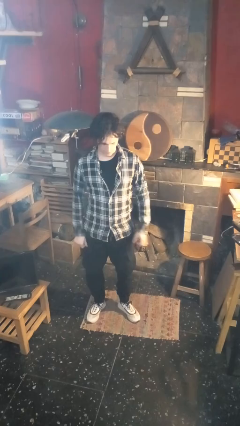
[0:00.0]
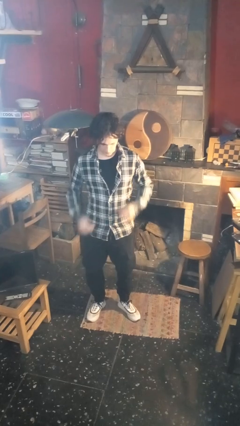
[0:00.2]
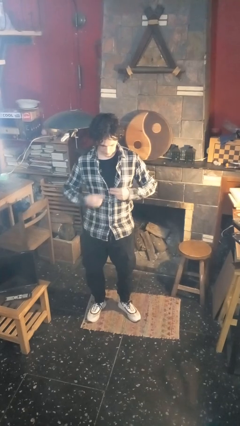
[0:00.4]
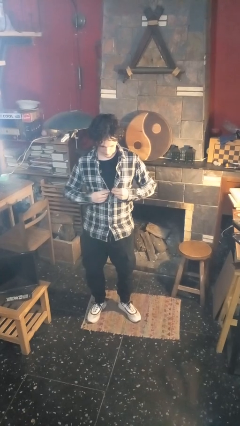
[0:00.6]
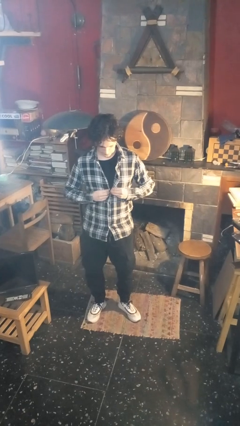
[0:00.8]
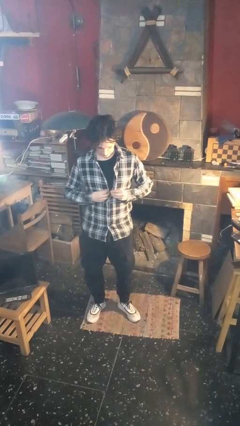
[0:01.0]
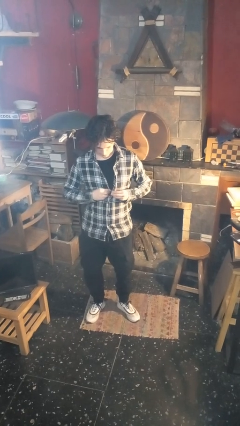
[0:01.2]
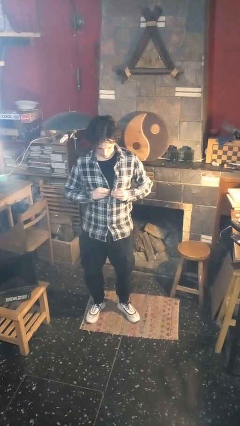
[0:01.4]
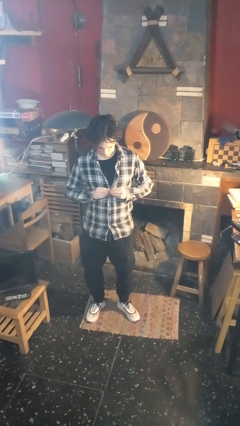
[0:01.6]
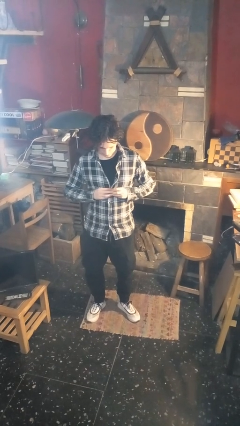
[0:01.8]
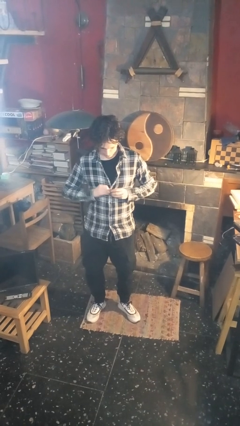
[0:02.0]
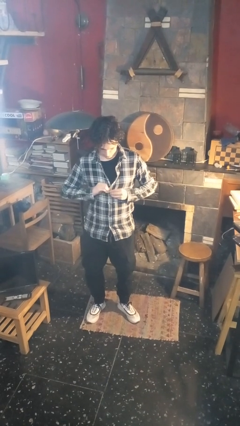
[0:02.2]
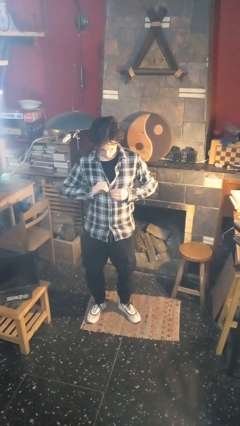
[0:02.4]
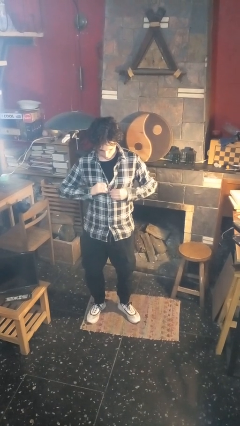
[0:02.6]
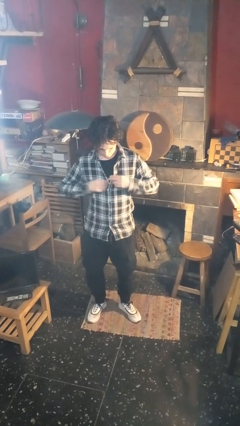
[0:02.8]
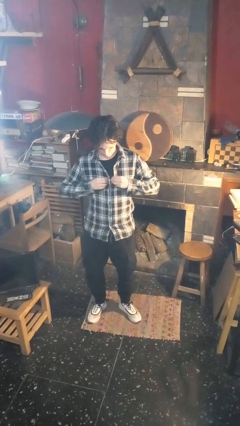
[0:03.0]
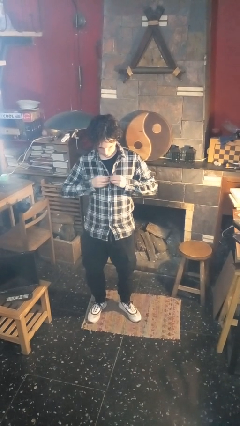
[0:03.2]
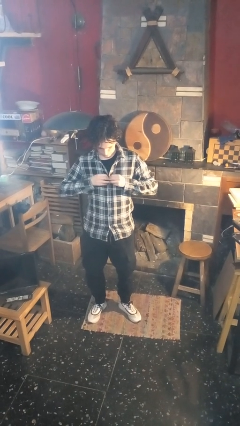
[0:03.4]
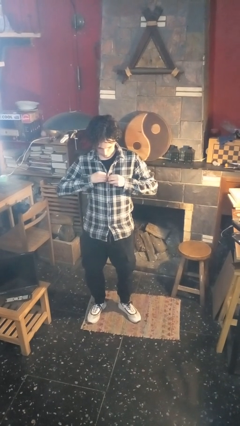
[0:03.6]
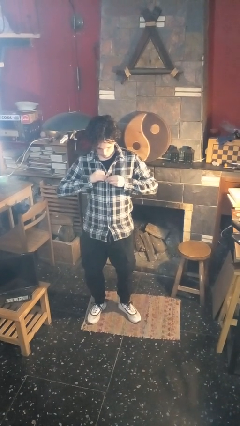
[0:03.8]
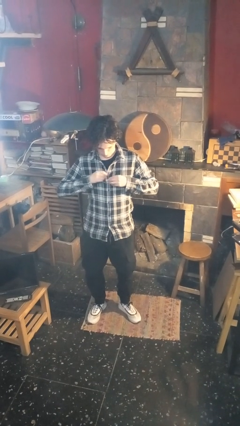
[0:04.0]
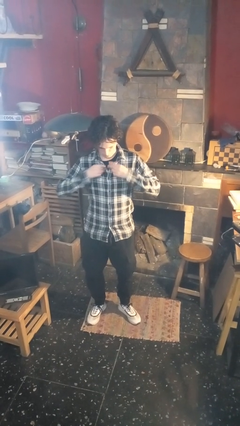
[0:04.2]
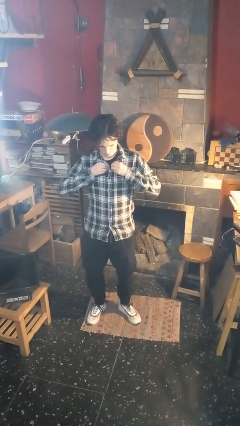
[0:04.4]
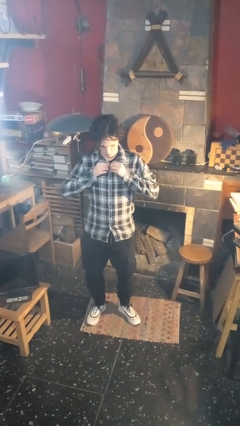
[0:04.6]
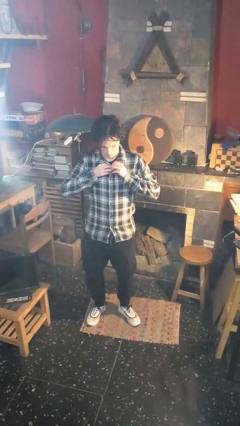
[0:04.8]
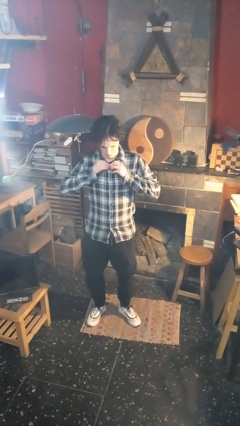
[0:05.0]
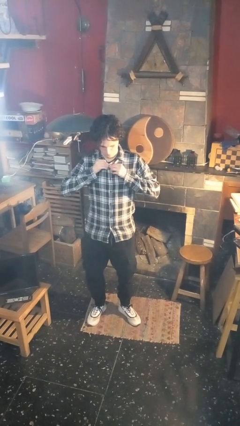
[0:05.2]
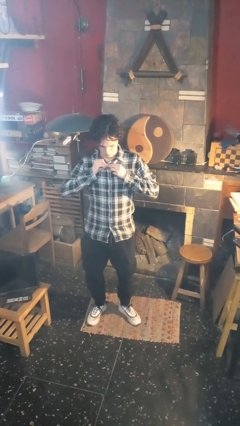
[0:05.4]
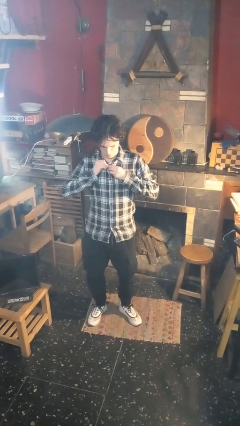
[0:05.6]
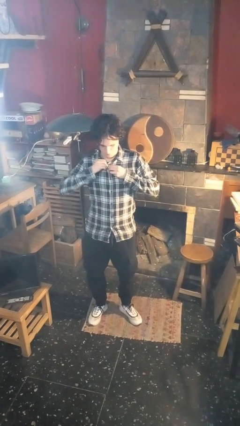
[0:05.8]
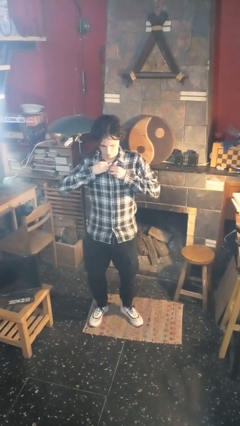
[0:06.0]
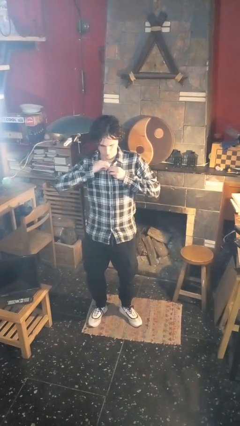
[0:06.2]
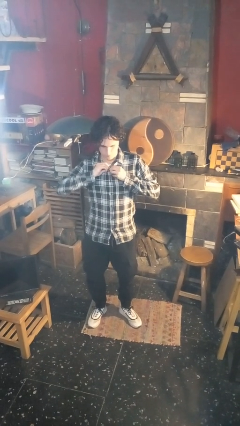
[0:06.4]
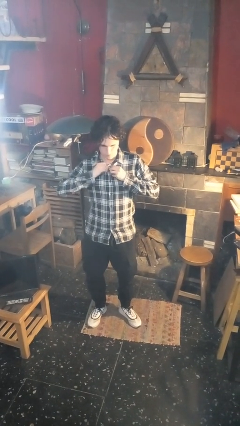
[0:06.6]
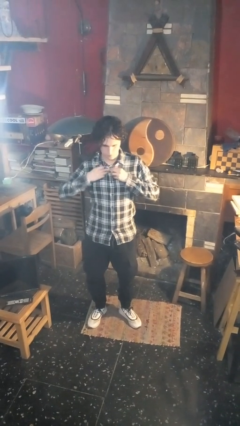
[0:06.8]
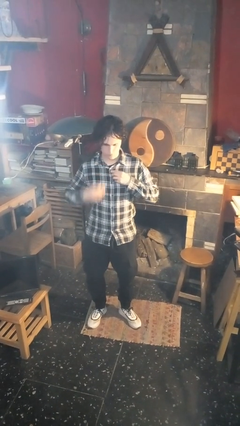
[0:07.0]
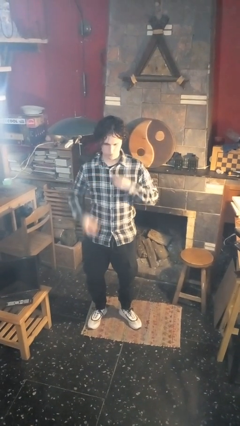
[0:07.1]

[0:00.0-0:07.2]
person buttons shirt

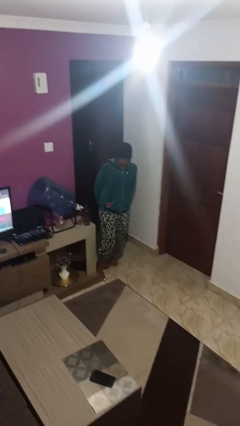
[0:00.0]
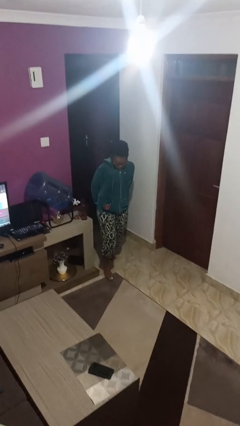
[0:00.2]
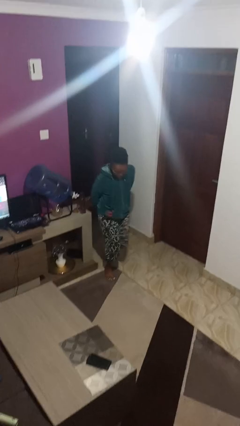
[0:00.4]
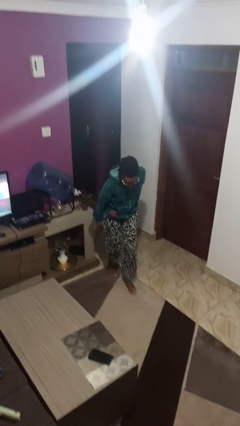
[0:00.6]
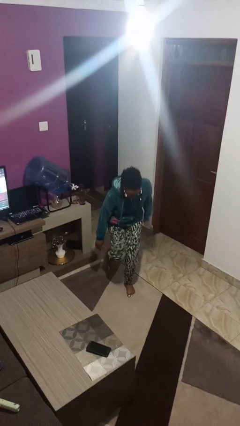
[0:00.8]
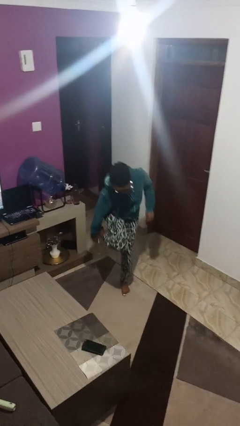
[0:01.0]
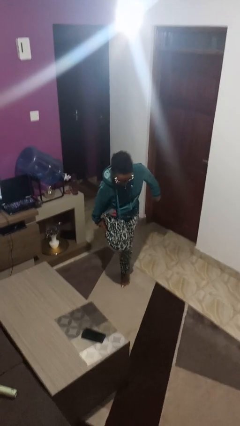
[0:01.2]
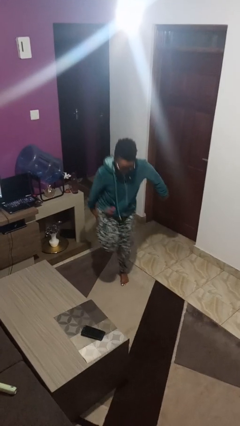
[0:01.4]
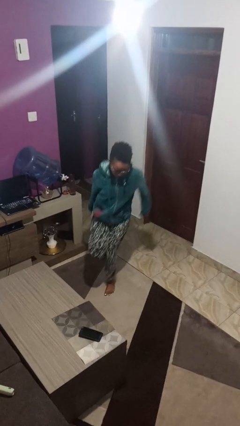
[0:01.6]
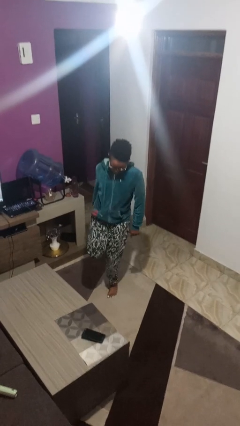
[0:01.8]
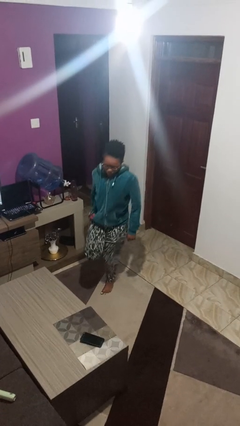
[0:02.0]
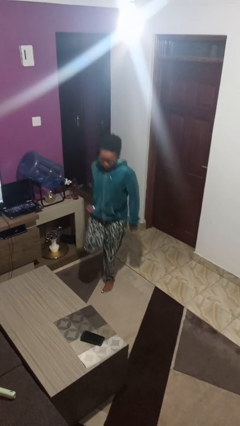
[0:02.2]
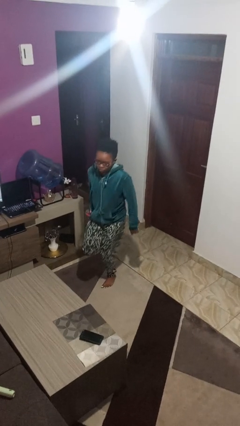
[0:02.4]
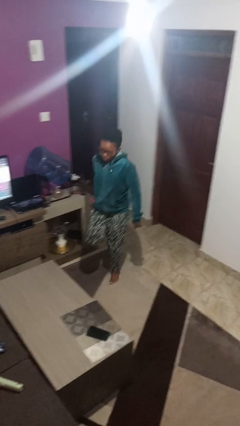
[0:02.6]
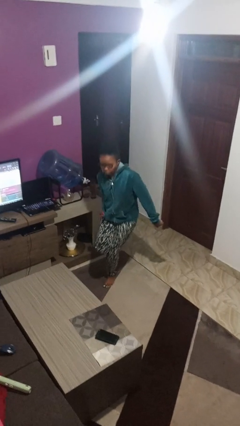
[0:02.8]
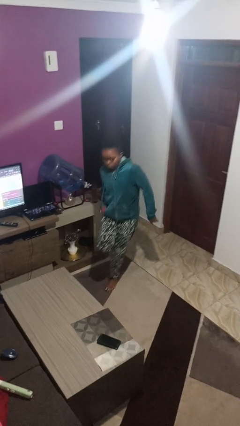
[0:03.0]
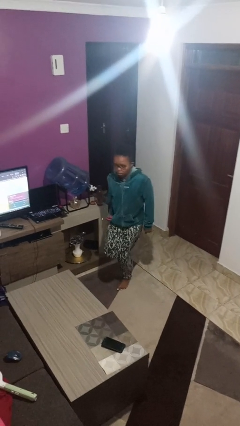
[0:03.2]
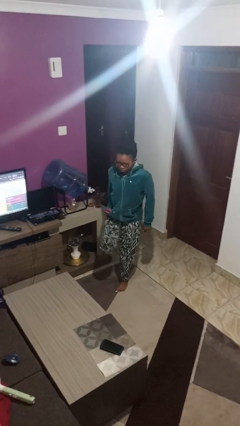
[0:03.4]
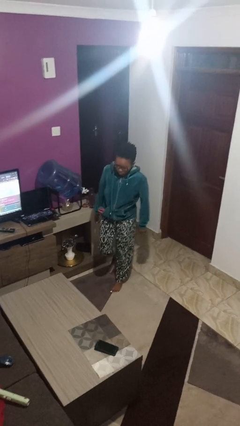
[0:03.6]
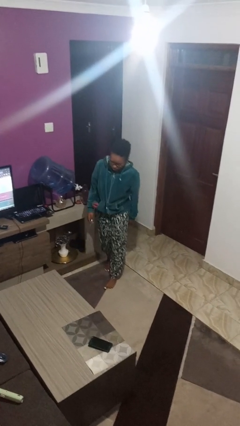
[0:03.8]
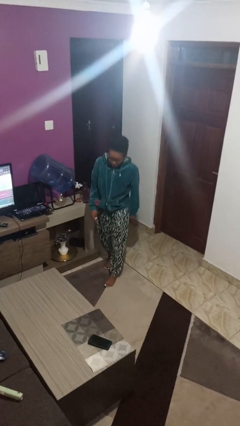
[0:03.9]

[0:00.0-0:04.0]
person stubs toe

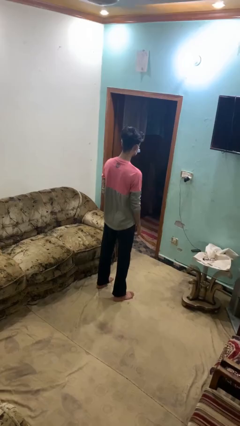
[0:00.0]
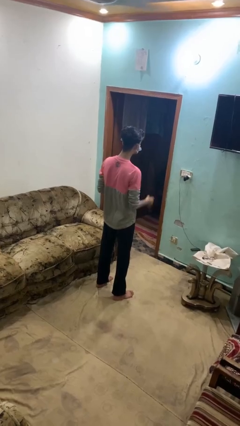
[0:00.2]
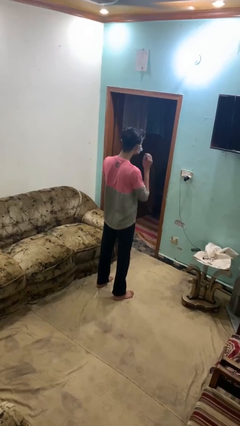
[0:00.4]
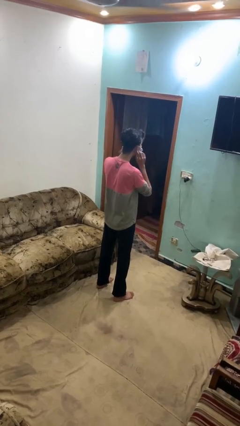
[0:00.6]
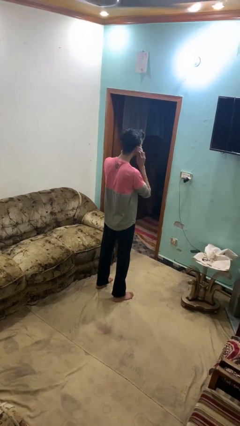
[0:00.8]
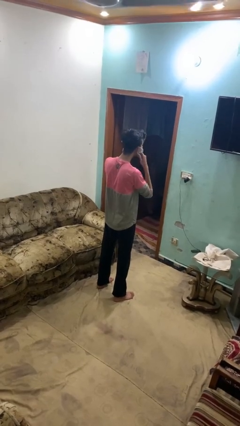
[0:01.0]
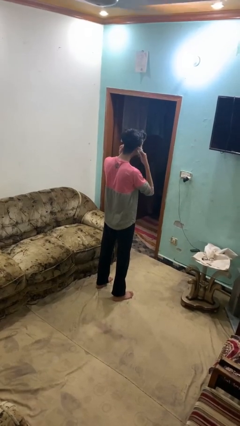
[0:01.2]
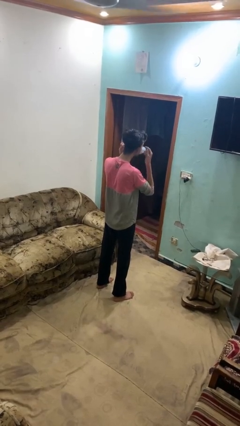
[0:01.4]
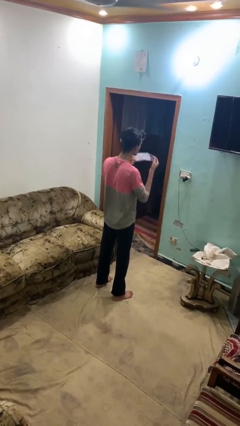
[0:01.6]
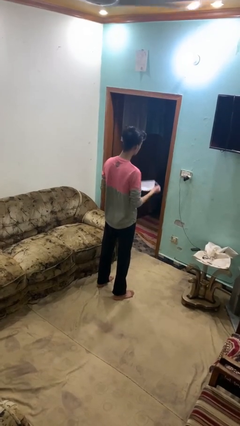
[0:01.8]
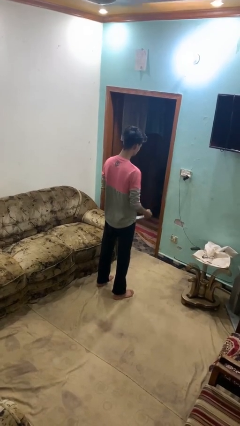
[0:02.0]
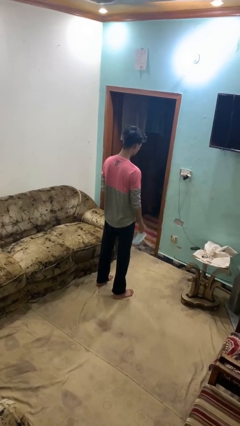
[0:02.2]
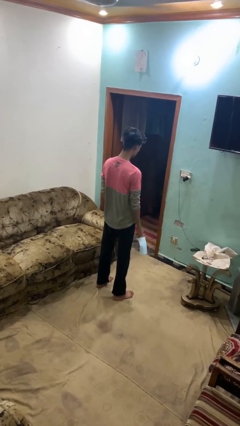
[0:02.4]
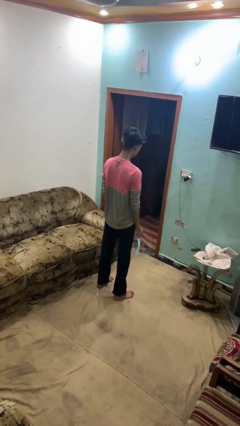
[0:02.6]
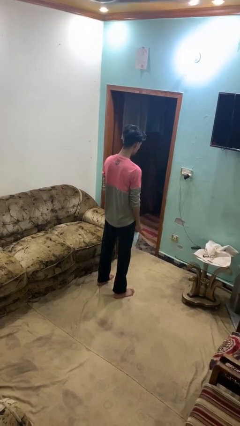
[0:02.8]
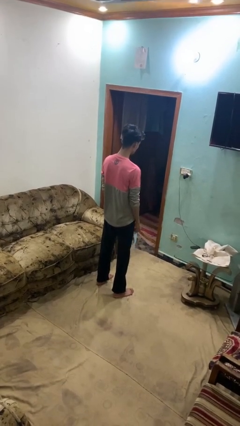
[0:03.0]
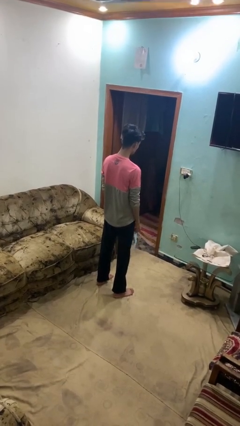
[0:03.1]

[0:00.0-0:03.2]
person takes off facemask

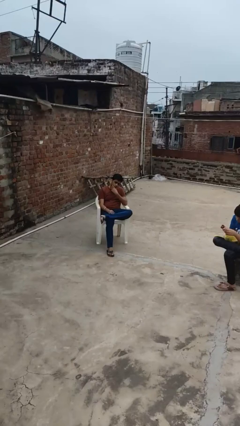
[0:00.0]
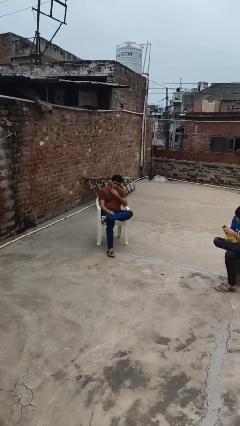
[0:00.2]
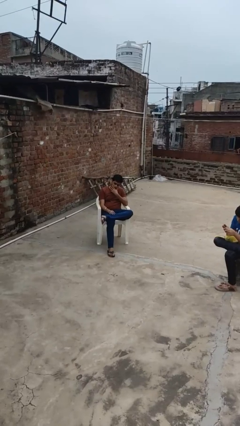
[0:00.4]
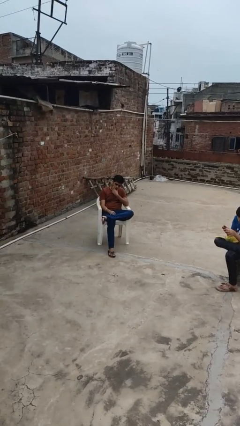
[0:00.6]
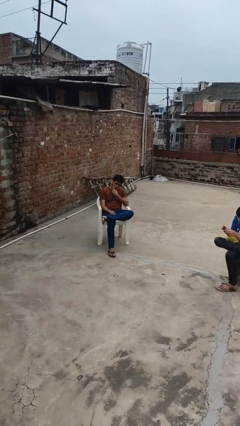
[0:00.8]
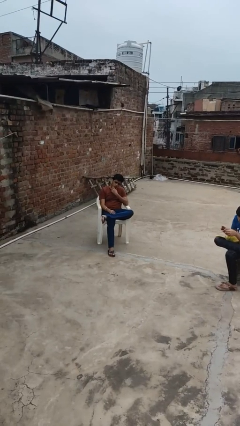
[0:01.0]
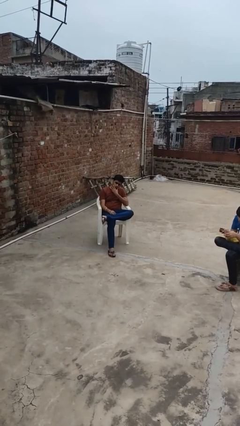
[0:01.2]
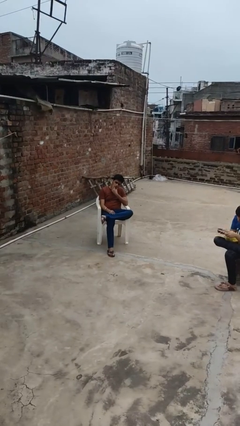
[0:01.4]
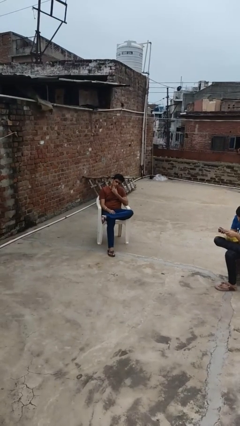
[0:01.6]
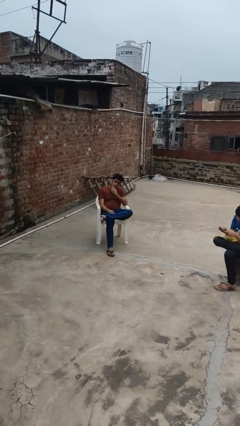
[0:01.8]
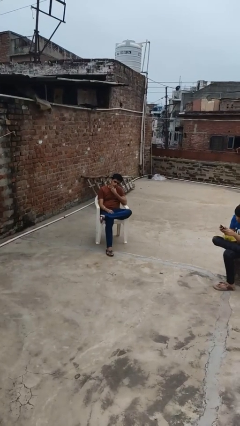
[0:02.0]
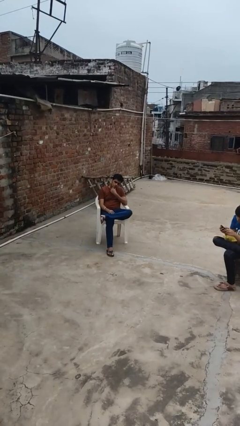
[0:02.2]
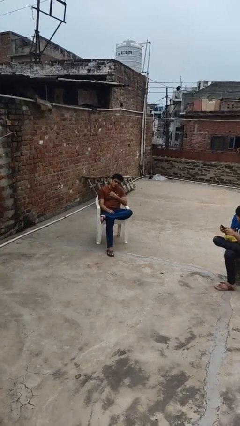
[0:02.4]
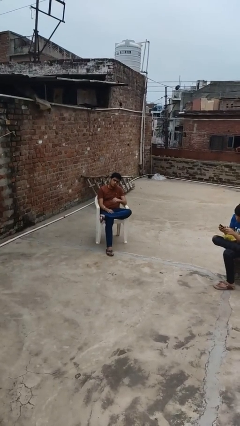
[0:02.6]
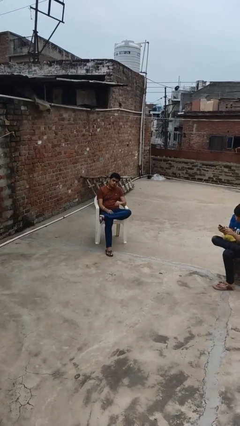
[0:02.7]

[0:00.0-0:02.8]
person strokes chin

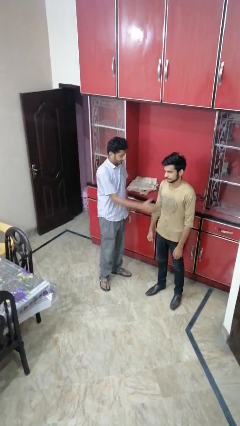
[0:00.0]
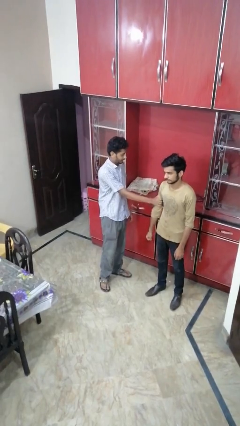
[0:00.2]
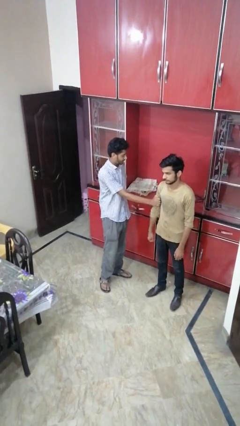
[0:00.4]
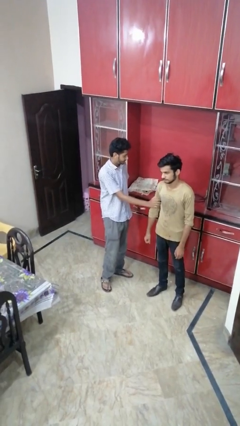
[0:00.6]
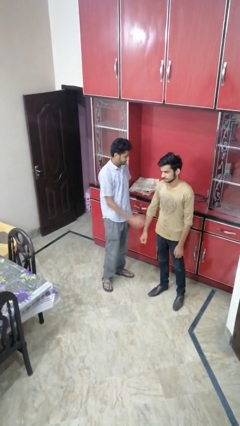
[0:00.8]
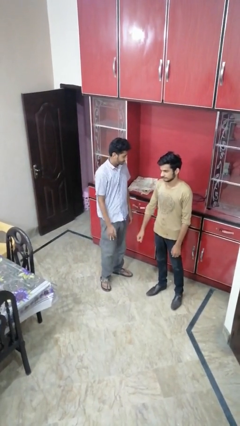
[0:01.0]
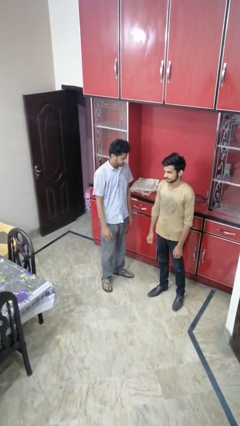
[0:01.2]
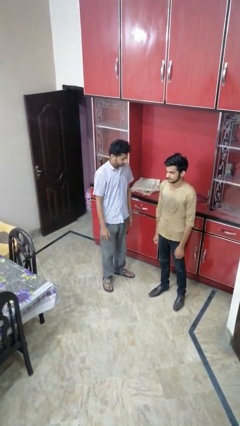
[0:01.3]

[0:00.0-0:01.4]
person grabs person by bicep
